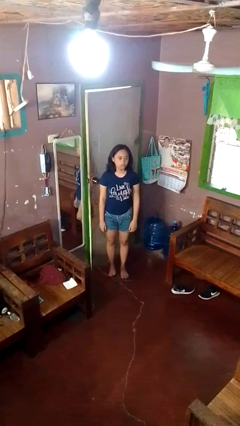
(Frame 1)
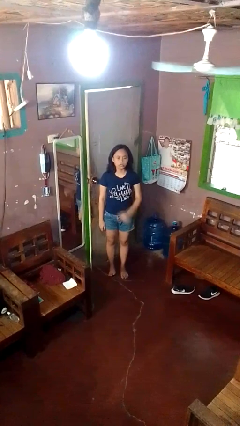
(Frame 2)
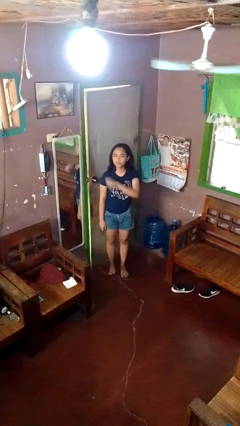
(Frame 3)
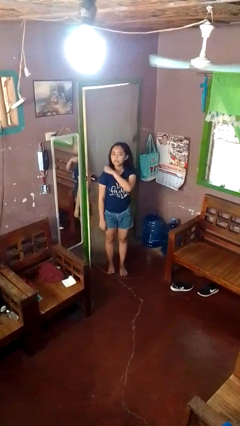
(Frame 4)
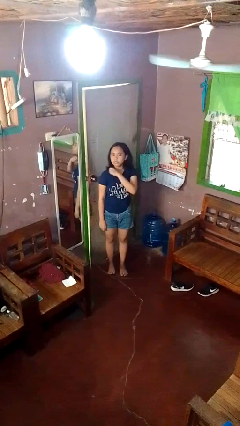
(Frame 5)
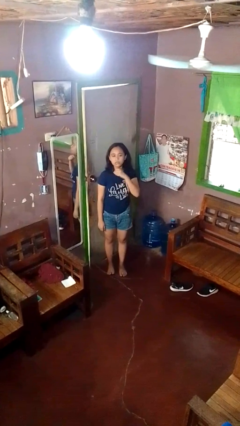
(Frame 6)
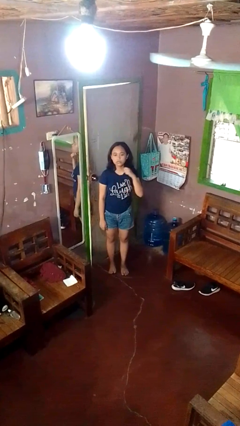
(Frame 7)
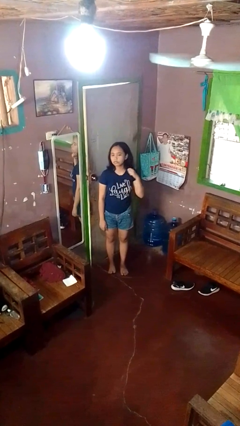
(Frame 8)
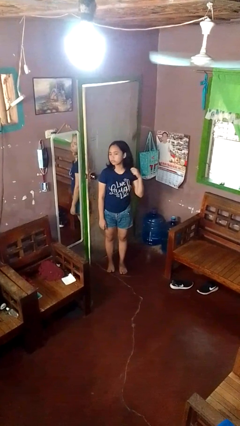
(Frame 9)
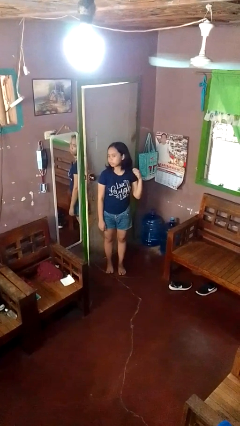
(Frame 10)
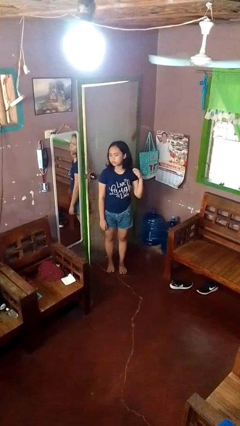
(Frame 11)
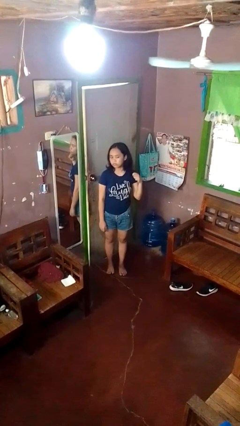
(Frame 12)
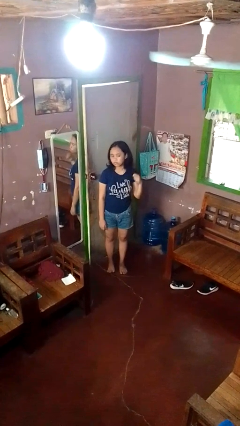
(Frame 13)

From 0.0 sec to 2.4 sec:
person gestures cut

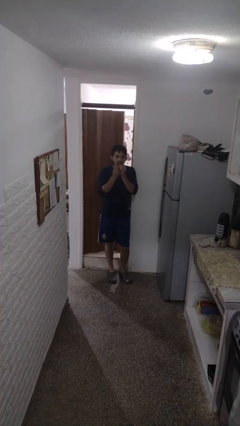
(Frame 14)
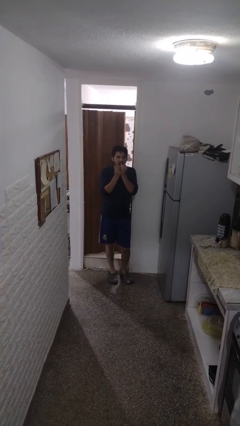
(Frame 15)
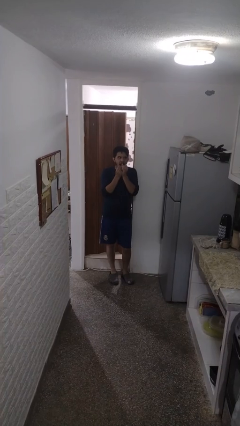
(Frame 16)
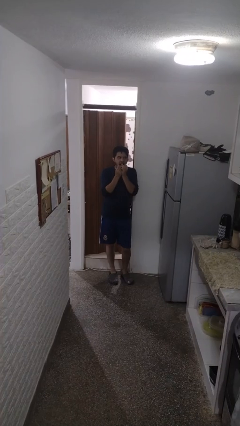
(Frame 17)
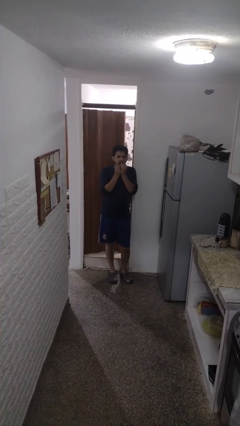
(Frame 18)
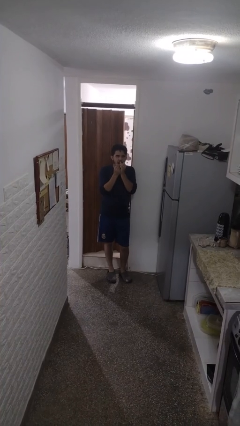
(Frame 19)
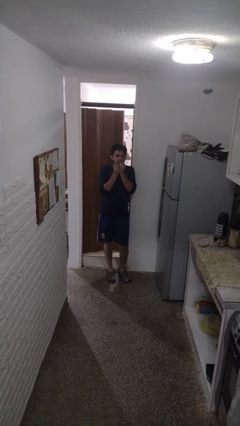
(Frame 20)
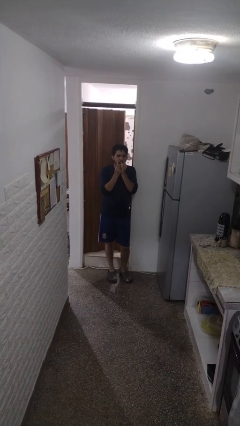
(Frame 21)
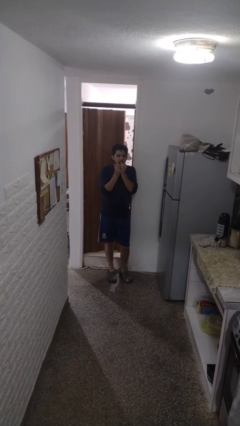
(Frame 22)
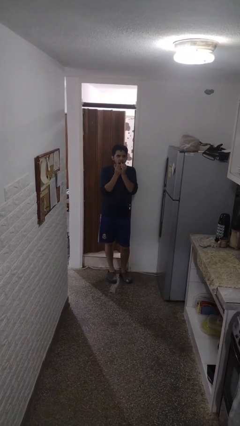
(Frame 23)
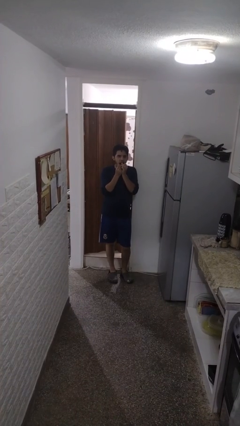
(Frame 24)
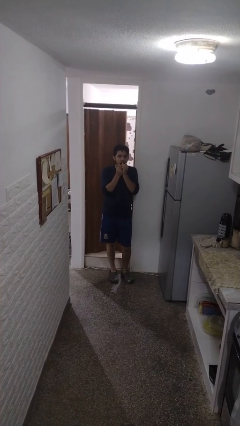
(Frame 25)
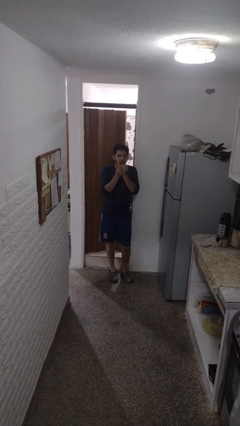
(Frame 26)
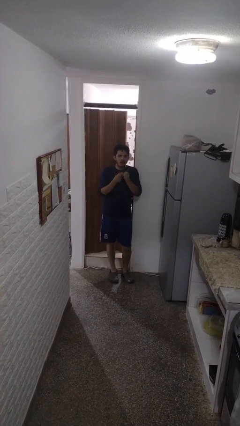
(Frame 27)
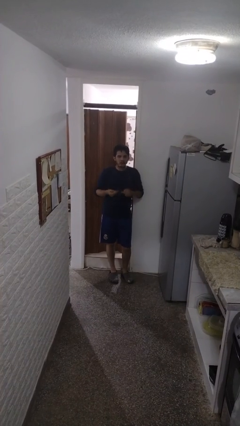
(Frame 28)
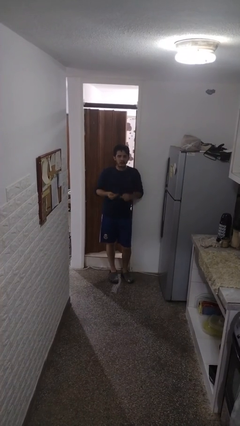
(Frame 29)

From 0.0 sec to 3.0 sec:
person flosses

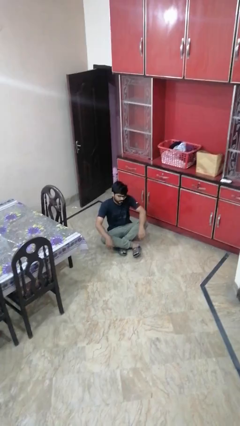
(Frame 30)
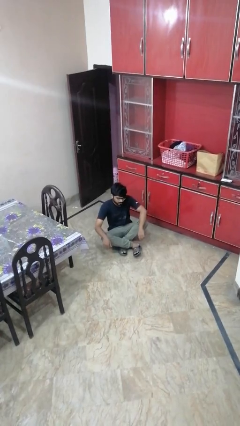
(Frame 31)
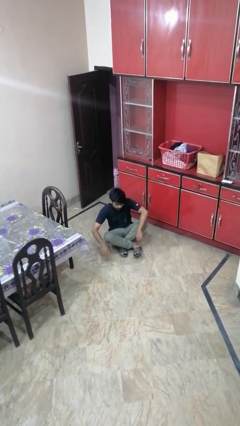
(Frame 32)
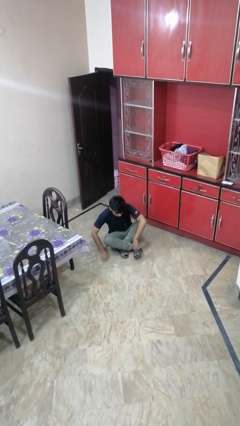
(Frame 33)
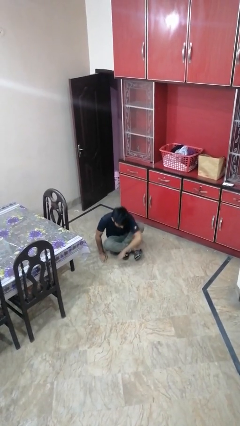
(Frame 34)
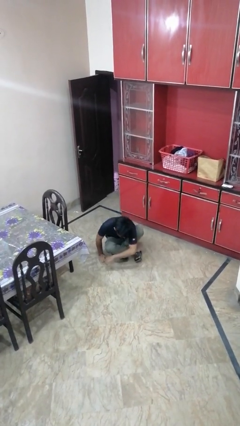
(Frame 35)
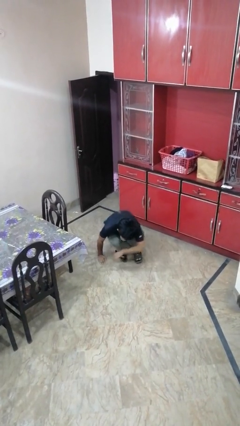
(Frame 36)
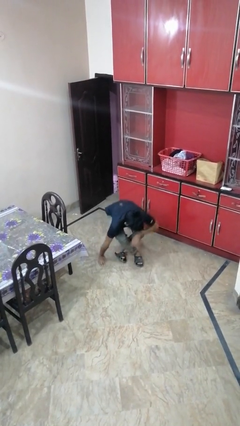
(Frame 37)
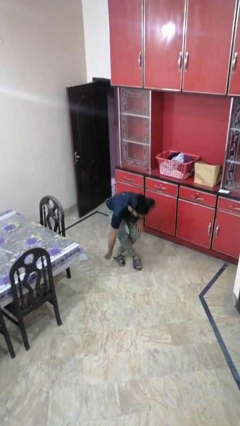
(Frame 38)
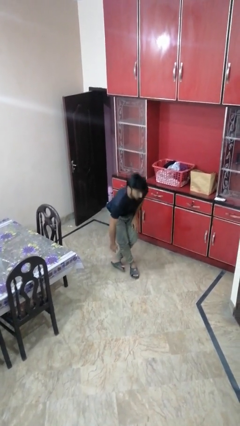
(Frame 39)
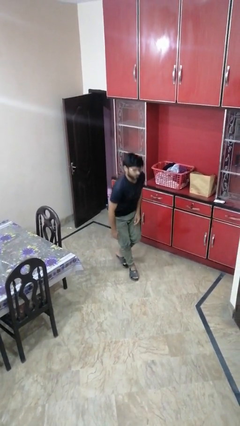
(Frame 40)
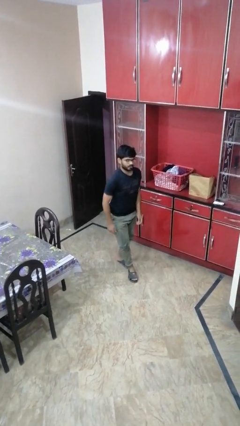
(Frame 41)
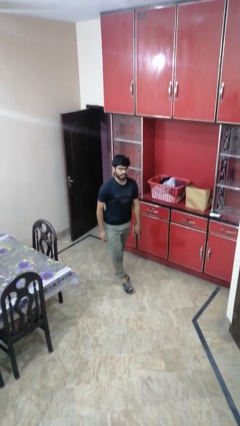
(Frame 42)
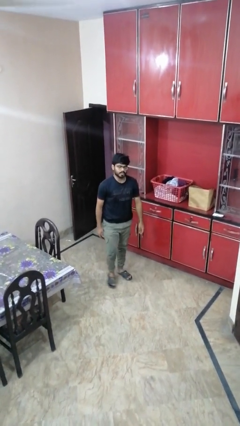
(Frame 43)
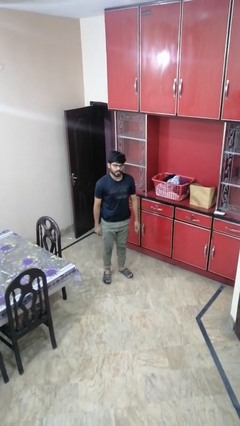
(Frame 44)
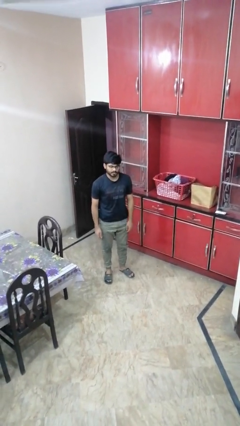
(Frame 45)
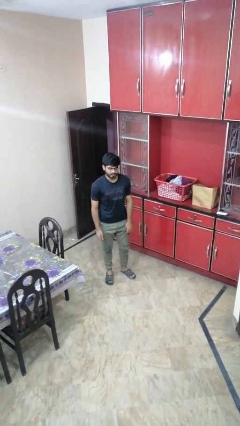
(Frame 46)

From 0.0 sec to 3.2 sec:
person stands up from floor

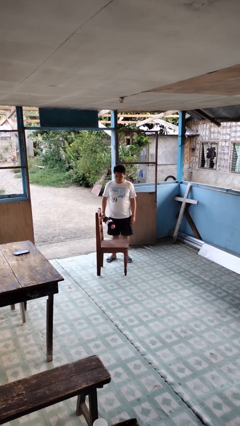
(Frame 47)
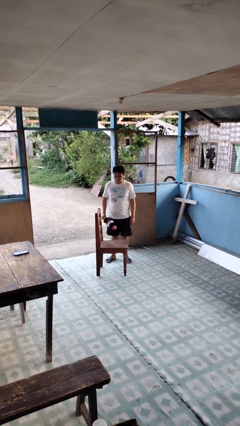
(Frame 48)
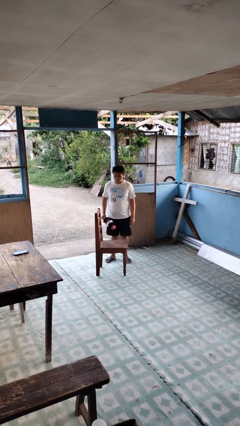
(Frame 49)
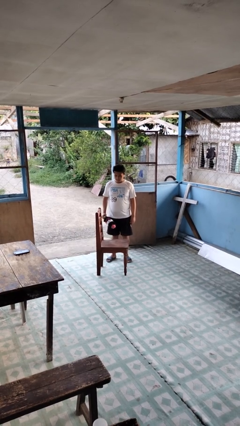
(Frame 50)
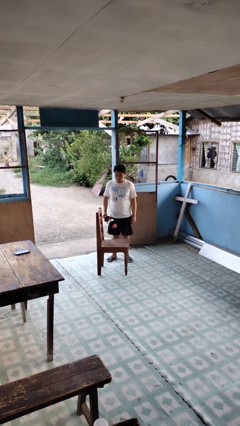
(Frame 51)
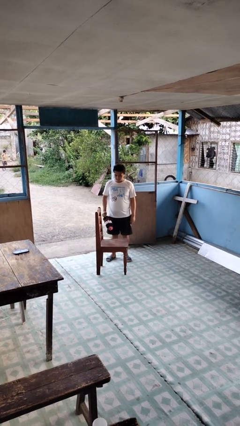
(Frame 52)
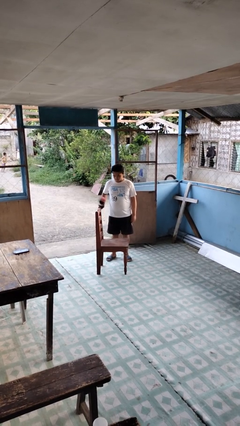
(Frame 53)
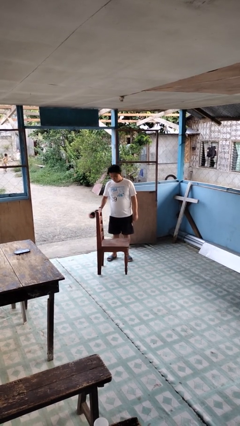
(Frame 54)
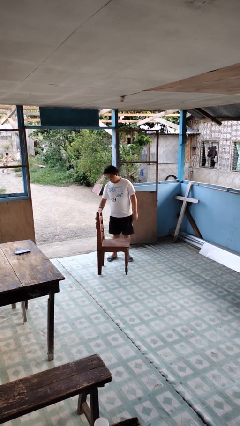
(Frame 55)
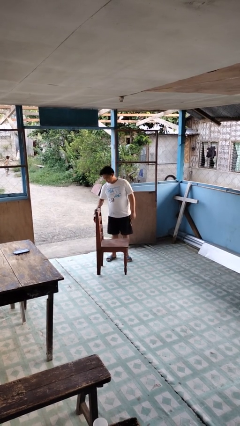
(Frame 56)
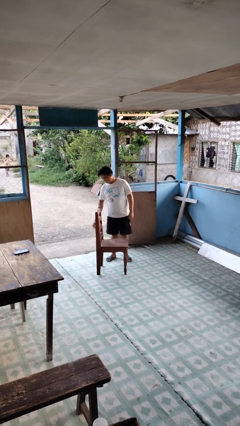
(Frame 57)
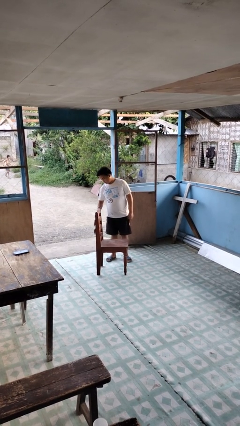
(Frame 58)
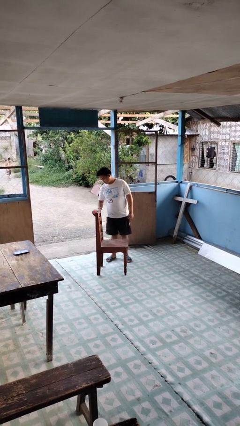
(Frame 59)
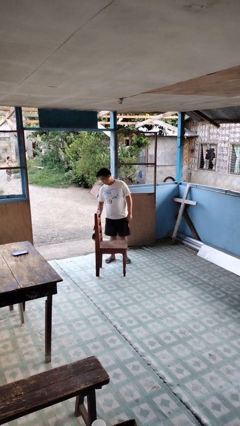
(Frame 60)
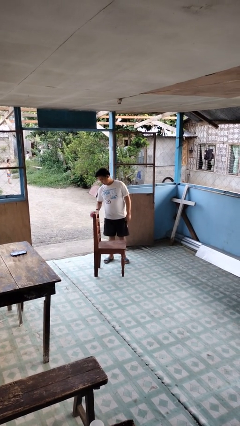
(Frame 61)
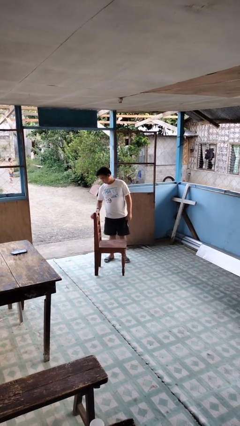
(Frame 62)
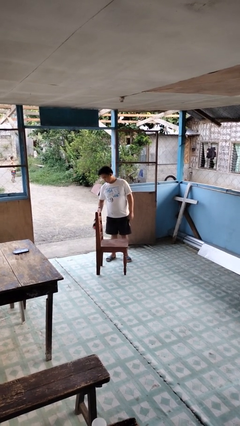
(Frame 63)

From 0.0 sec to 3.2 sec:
person dusts furniture

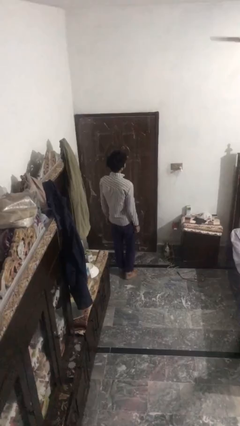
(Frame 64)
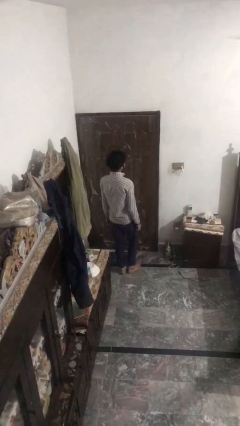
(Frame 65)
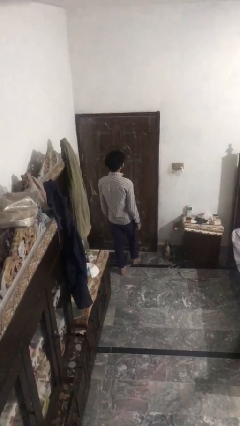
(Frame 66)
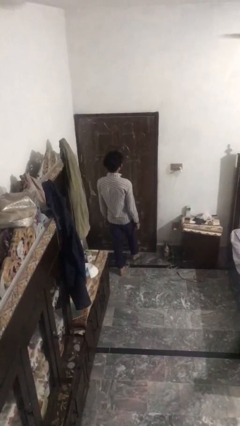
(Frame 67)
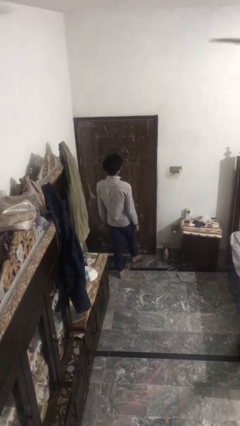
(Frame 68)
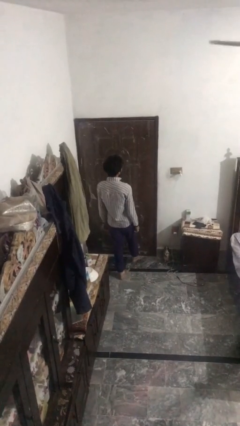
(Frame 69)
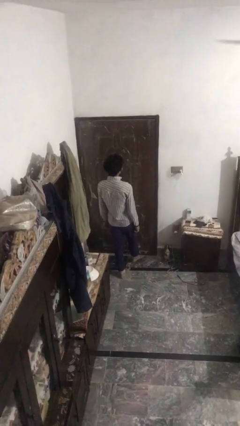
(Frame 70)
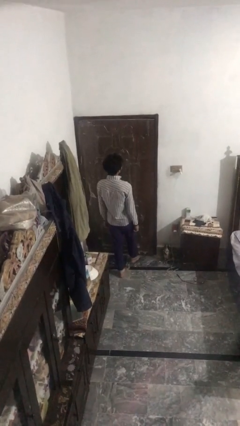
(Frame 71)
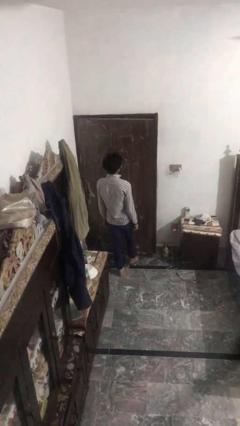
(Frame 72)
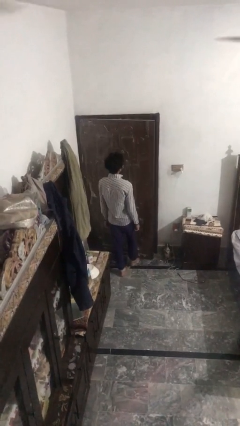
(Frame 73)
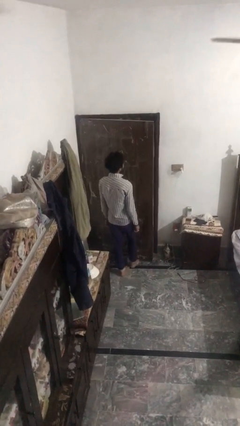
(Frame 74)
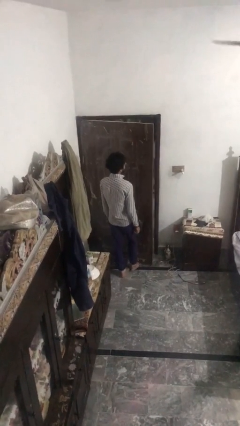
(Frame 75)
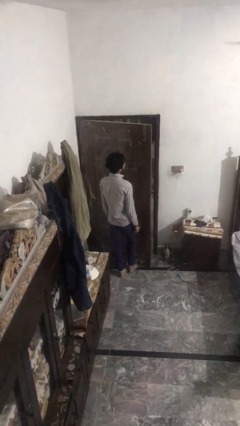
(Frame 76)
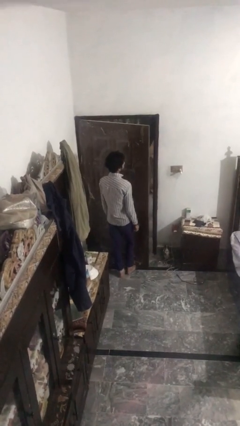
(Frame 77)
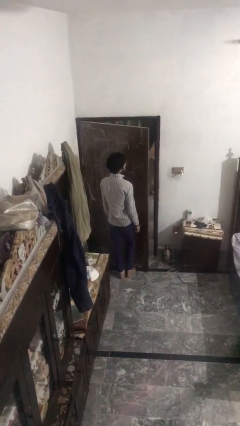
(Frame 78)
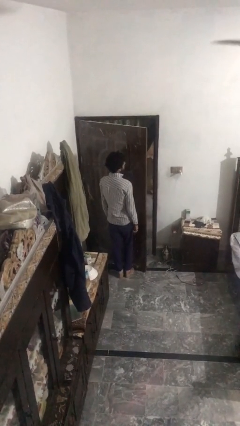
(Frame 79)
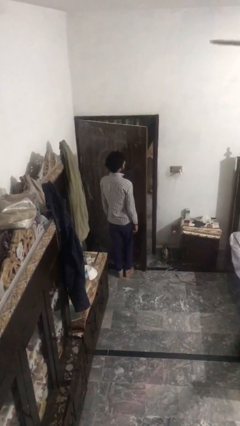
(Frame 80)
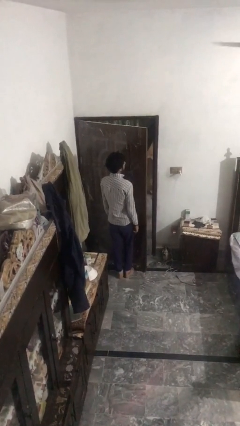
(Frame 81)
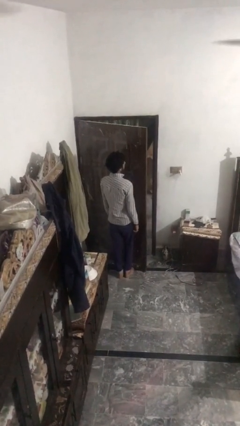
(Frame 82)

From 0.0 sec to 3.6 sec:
person opens facility door

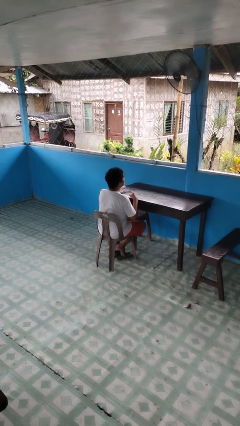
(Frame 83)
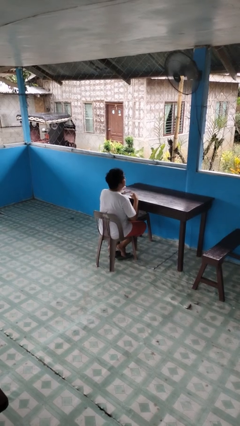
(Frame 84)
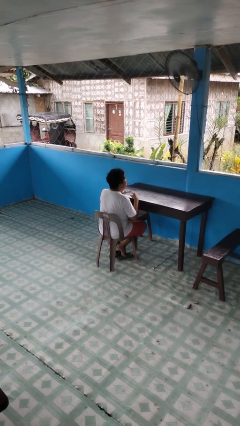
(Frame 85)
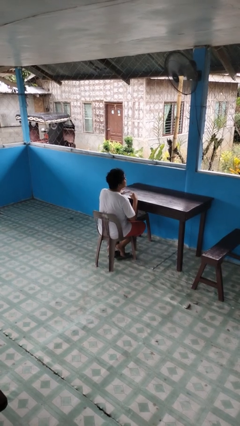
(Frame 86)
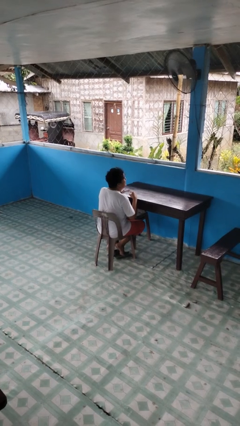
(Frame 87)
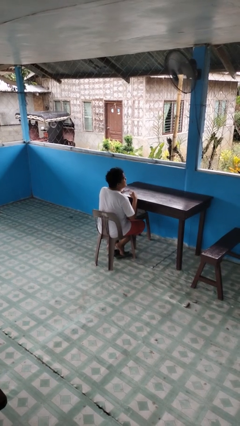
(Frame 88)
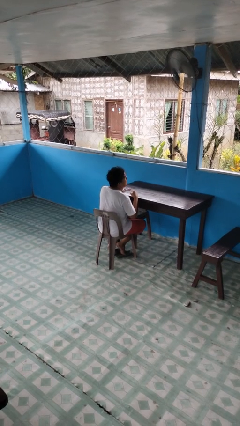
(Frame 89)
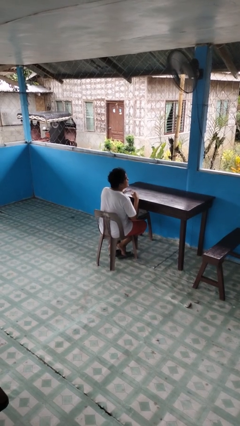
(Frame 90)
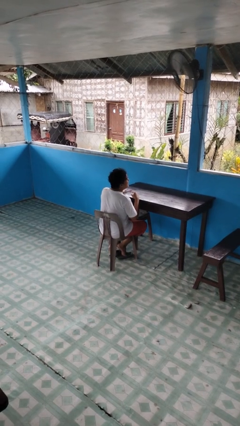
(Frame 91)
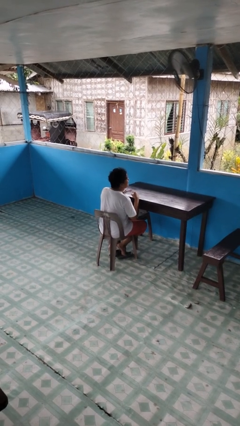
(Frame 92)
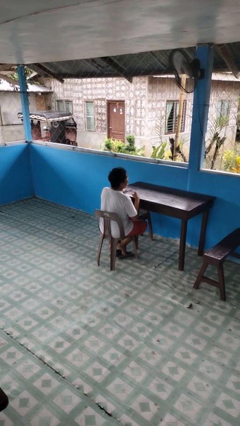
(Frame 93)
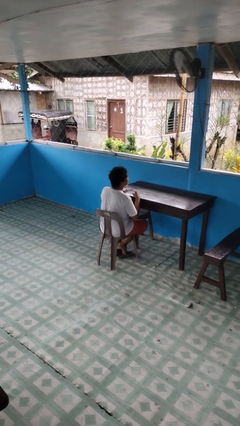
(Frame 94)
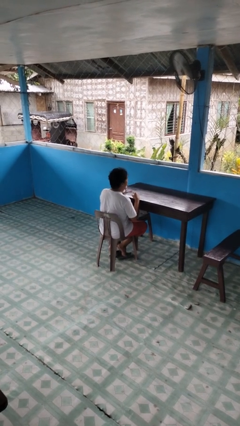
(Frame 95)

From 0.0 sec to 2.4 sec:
person applies shaving cream
